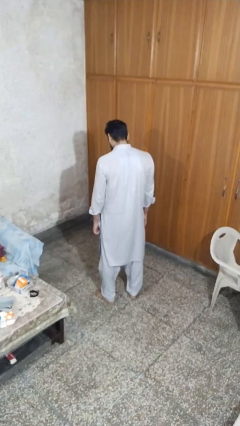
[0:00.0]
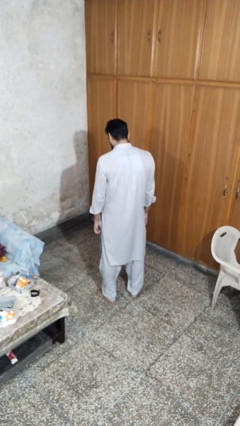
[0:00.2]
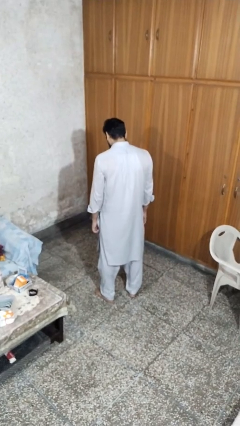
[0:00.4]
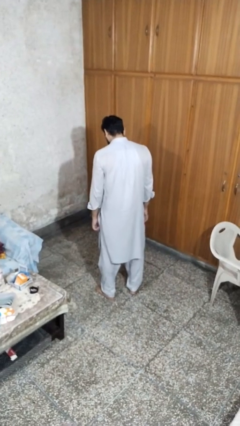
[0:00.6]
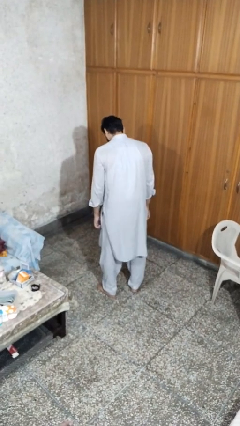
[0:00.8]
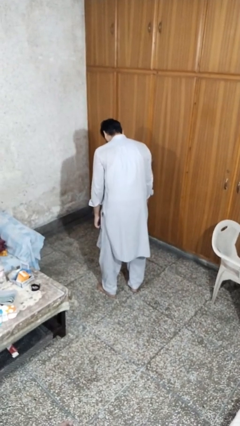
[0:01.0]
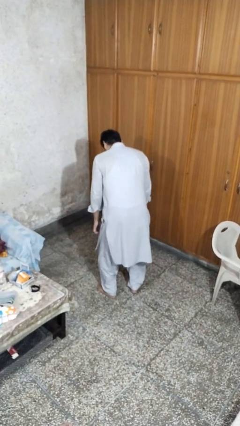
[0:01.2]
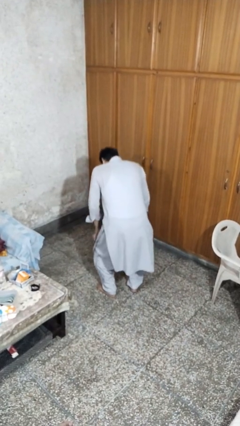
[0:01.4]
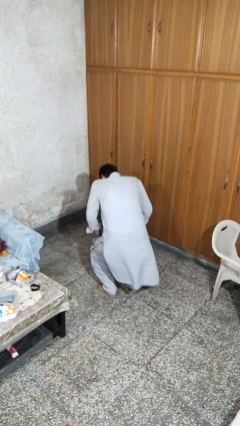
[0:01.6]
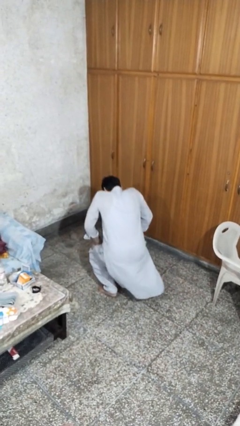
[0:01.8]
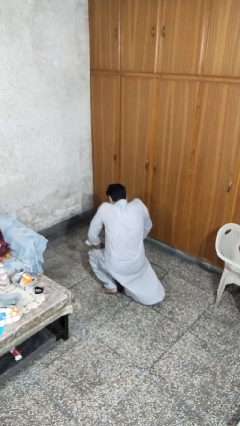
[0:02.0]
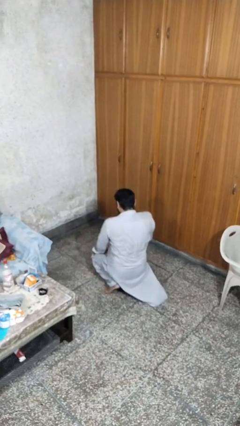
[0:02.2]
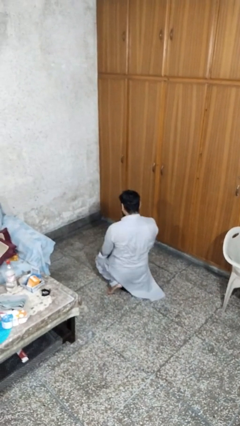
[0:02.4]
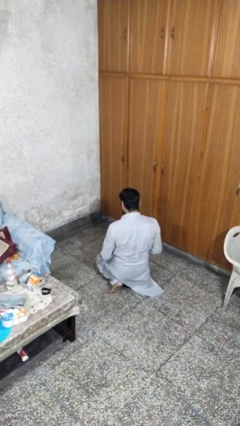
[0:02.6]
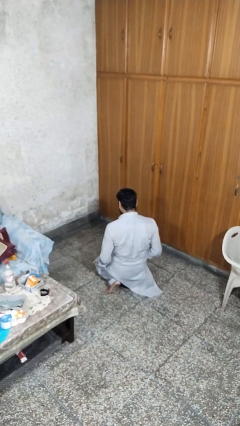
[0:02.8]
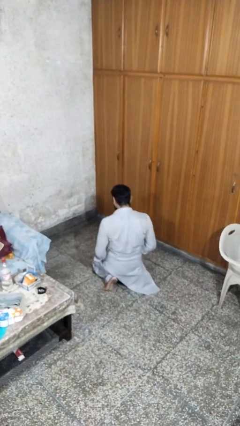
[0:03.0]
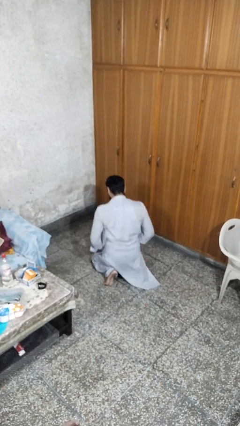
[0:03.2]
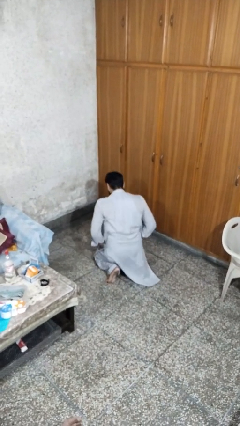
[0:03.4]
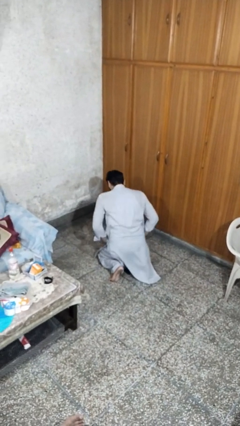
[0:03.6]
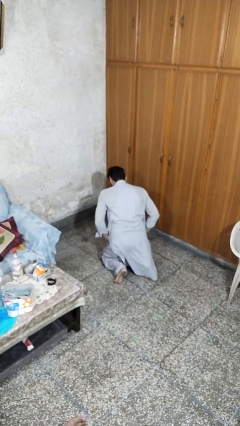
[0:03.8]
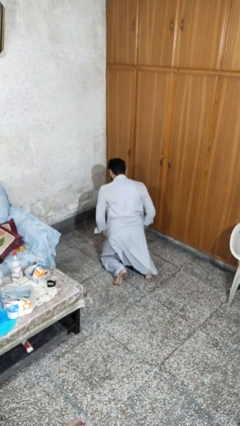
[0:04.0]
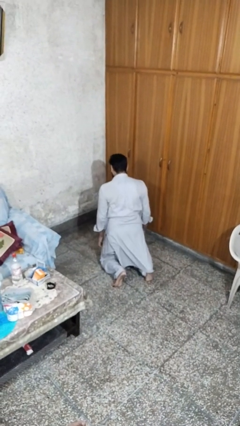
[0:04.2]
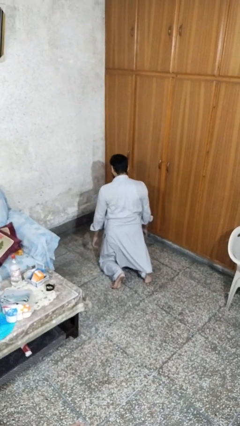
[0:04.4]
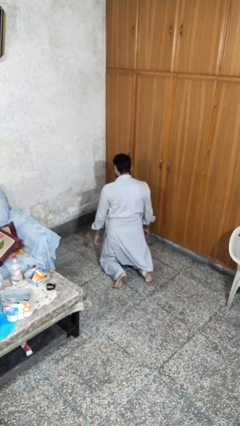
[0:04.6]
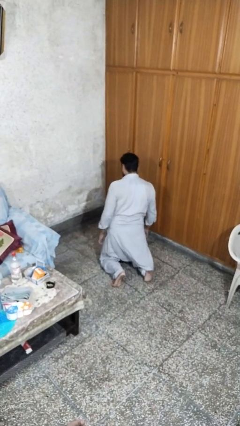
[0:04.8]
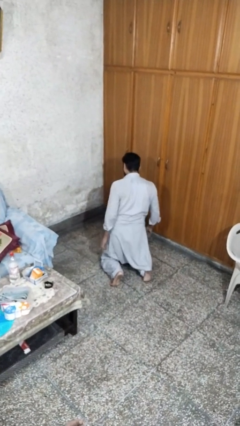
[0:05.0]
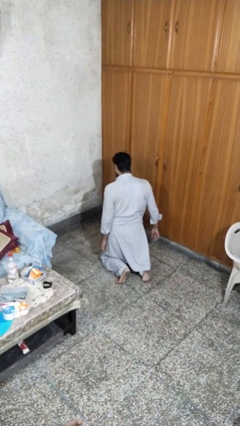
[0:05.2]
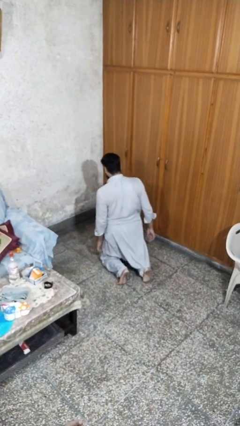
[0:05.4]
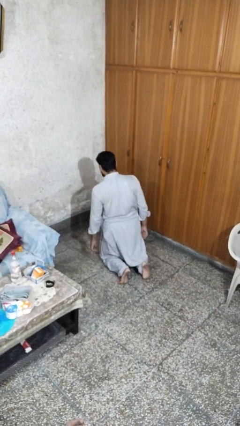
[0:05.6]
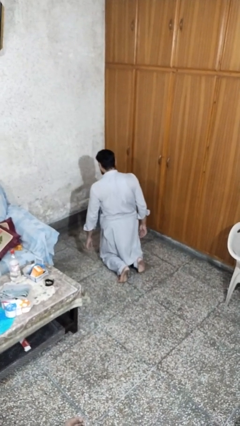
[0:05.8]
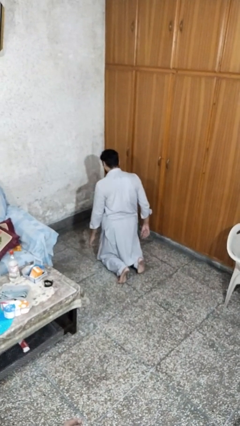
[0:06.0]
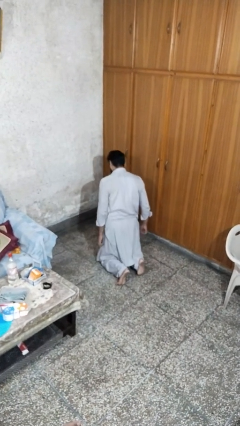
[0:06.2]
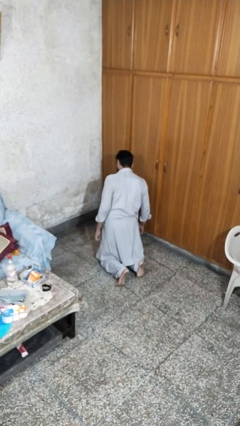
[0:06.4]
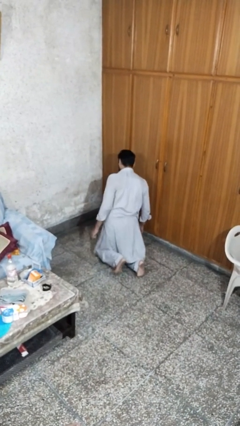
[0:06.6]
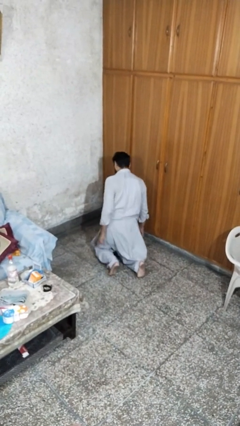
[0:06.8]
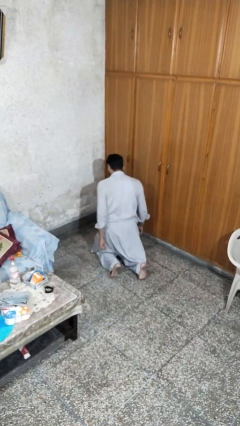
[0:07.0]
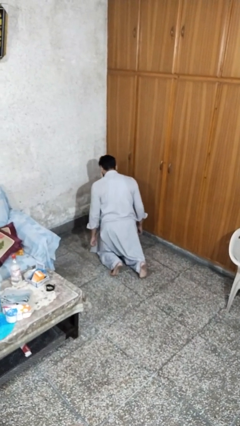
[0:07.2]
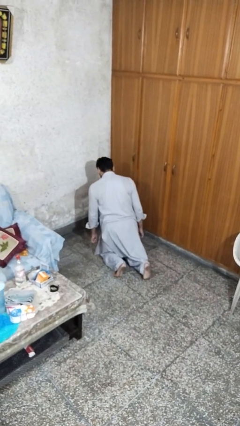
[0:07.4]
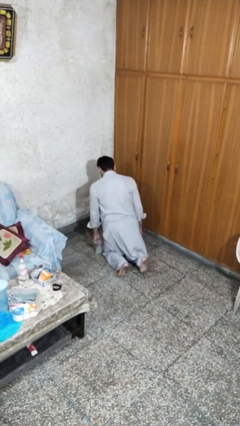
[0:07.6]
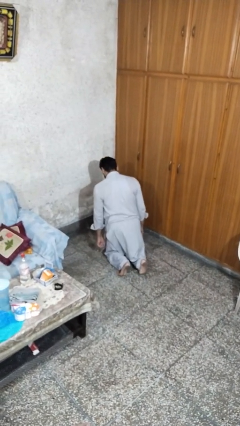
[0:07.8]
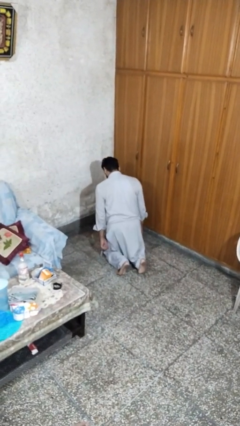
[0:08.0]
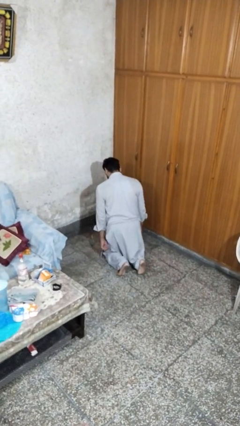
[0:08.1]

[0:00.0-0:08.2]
person exercises with lunges

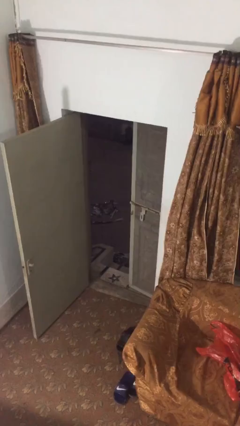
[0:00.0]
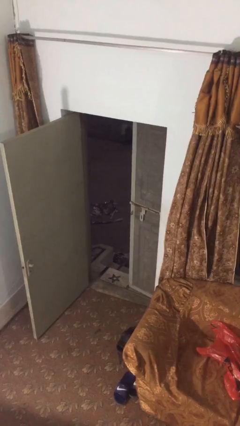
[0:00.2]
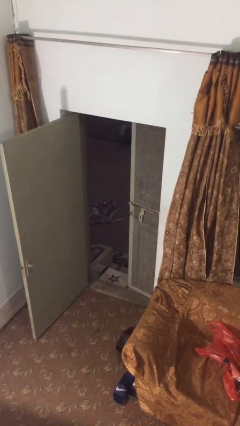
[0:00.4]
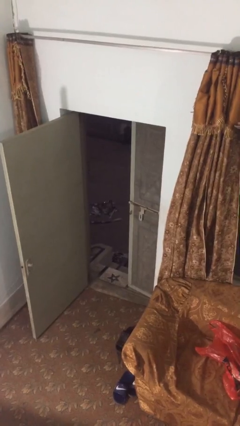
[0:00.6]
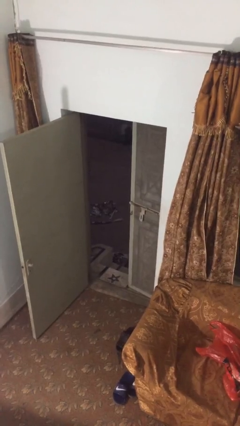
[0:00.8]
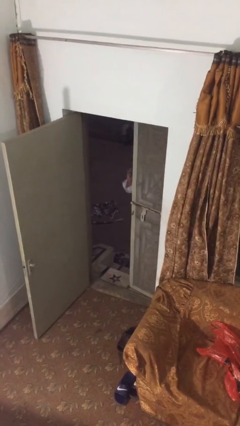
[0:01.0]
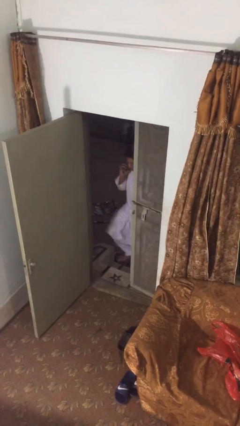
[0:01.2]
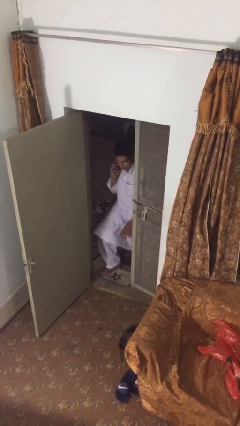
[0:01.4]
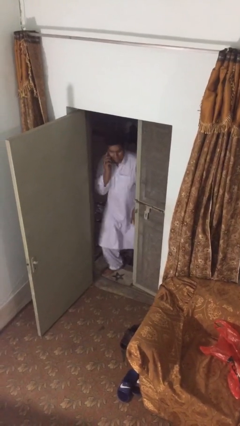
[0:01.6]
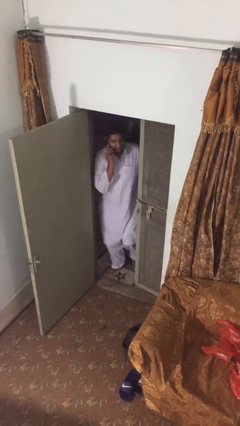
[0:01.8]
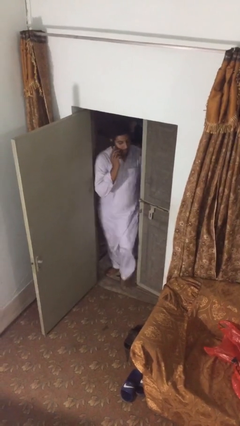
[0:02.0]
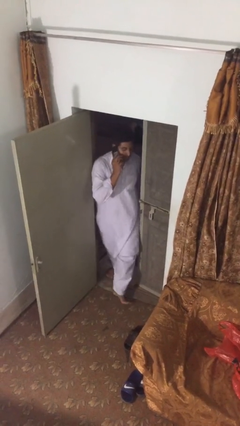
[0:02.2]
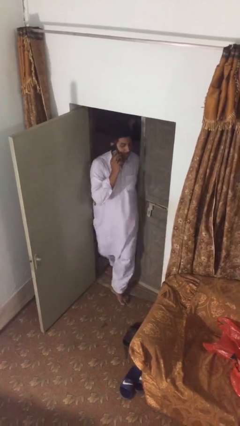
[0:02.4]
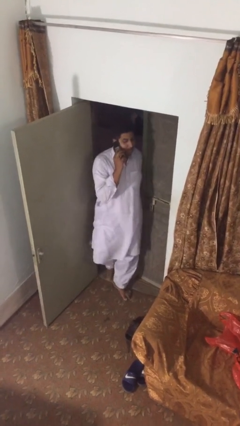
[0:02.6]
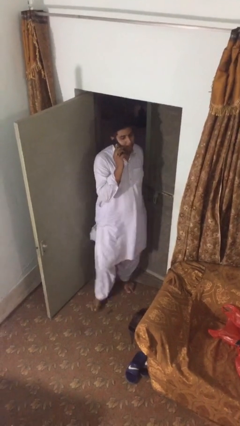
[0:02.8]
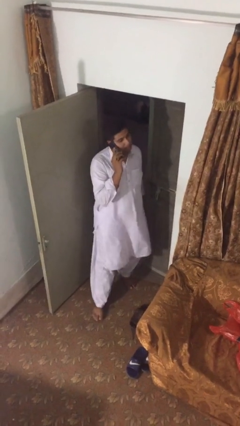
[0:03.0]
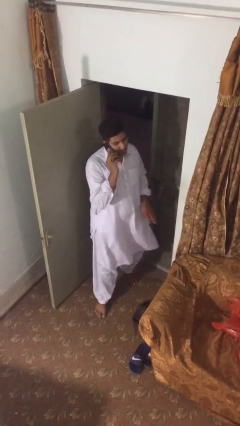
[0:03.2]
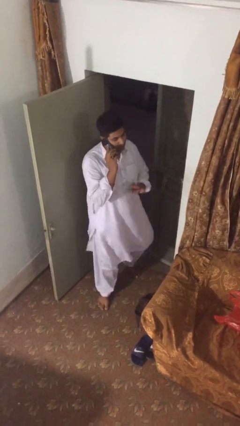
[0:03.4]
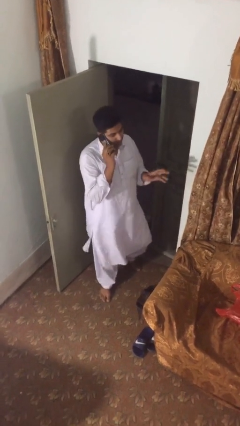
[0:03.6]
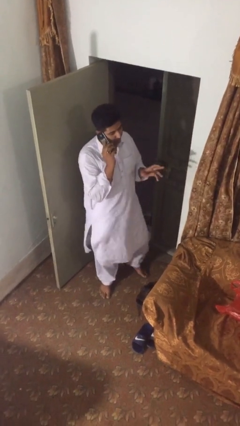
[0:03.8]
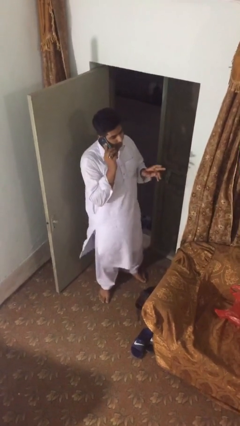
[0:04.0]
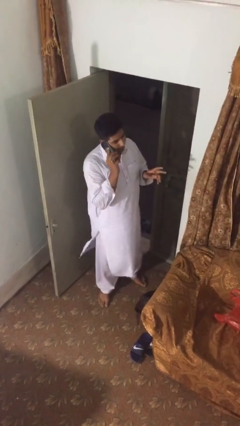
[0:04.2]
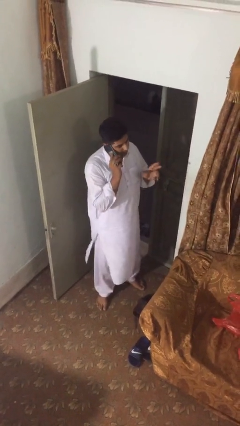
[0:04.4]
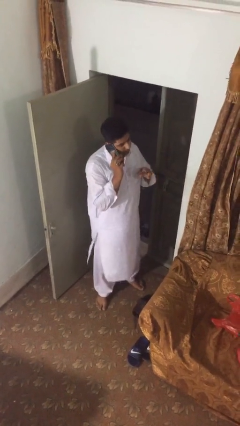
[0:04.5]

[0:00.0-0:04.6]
person enters scene through structure

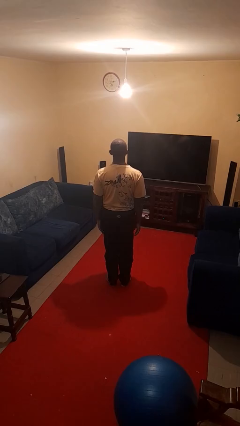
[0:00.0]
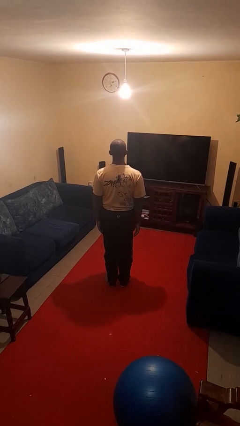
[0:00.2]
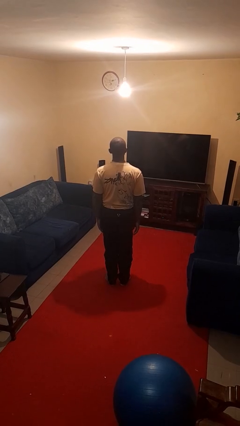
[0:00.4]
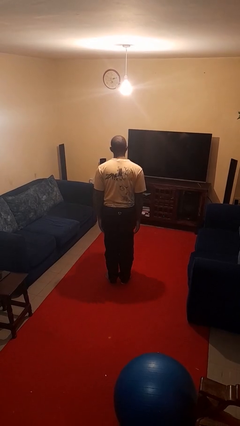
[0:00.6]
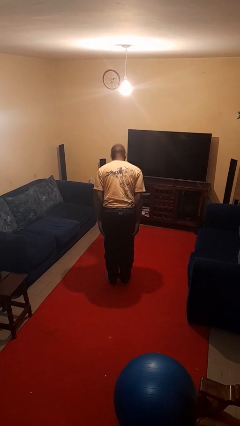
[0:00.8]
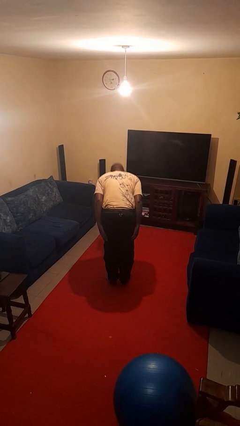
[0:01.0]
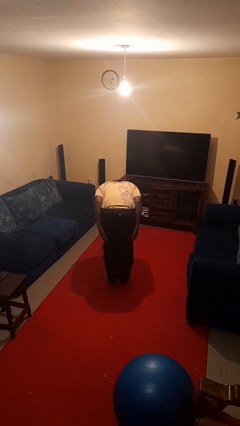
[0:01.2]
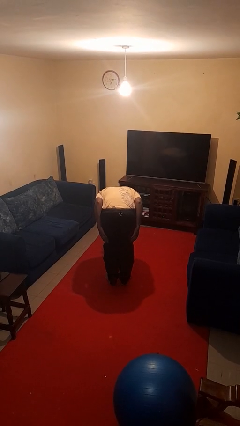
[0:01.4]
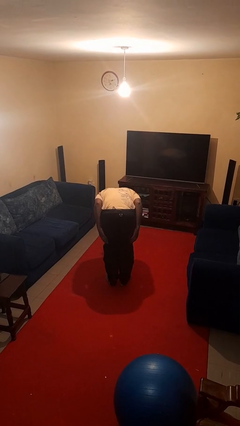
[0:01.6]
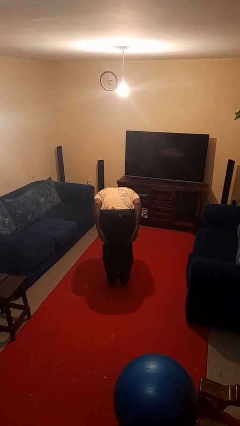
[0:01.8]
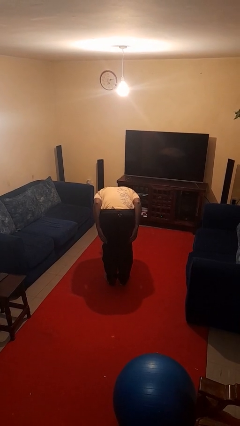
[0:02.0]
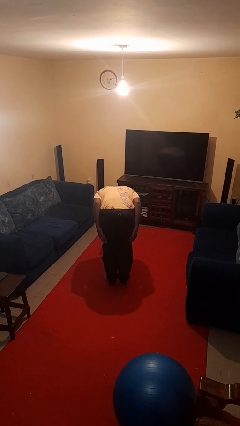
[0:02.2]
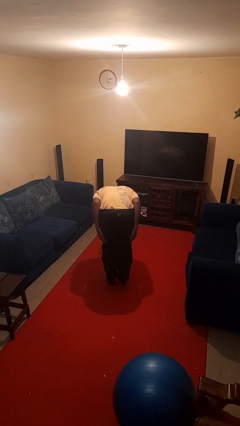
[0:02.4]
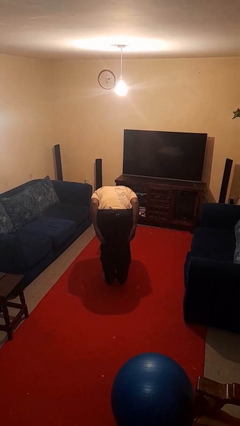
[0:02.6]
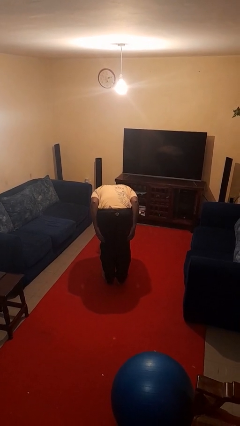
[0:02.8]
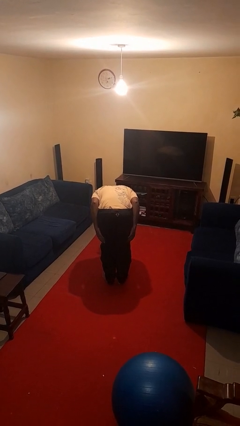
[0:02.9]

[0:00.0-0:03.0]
person bows

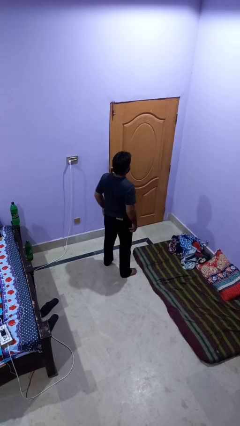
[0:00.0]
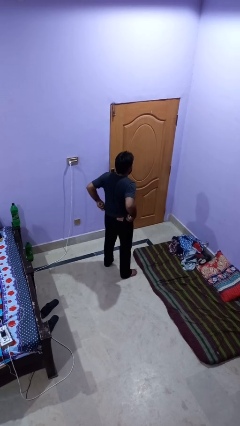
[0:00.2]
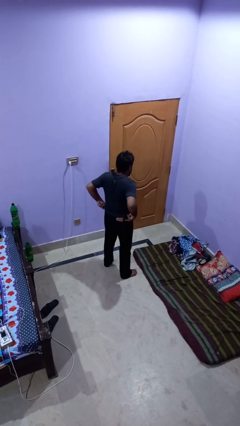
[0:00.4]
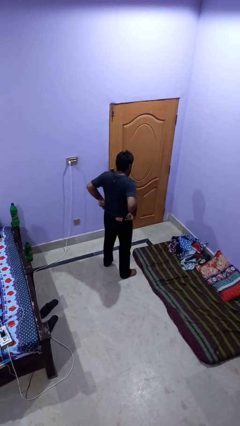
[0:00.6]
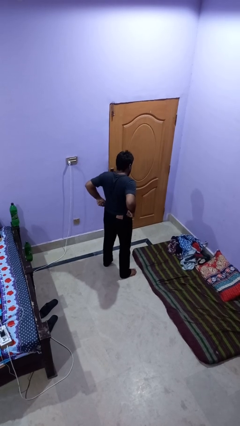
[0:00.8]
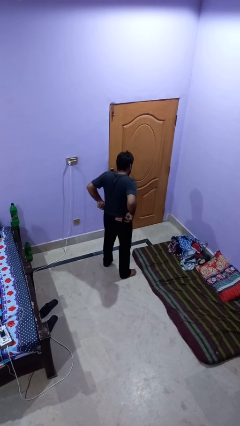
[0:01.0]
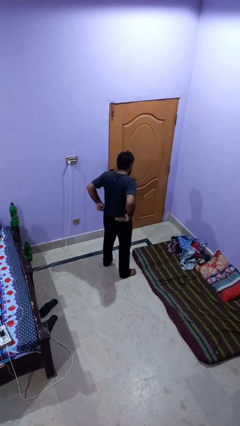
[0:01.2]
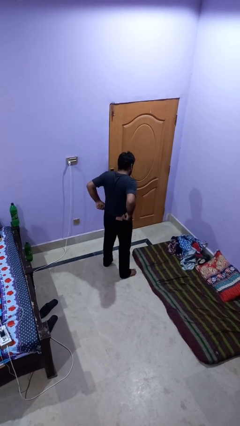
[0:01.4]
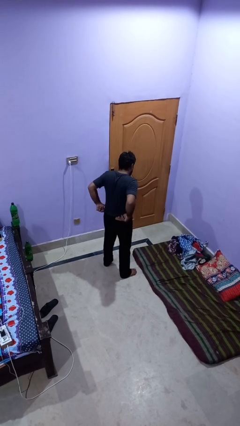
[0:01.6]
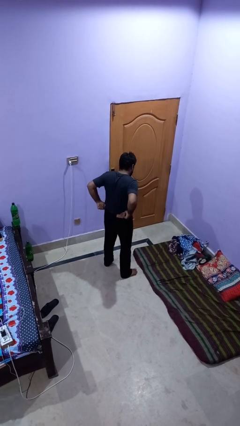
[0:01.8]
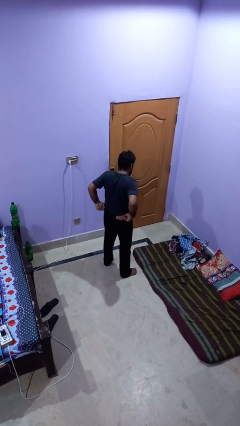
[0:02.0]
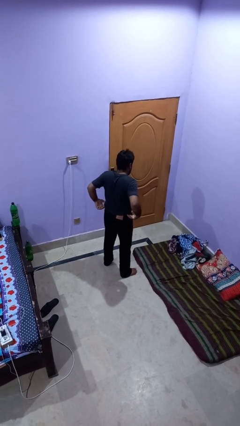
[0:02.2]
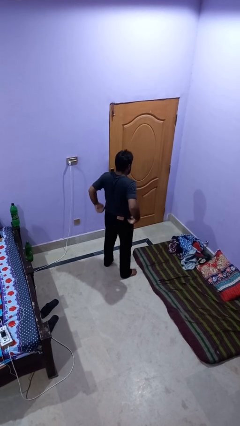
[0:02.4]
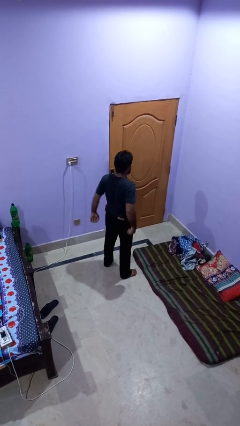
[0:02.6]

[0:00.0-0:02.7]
person hikes up pants
